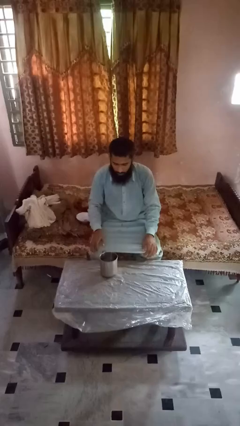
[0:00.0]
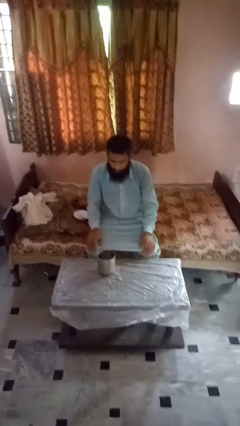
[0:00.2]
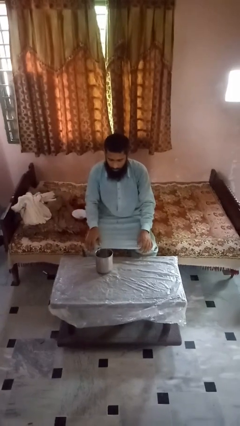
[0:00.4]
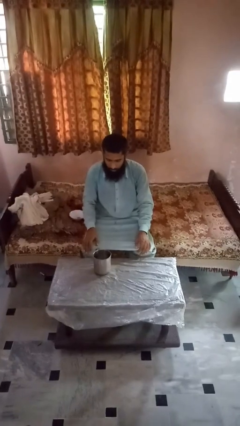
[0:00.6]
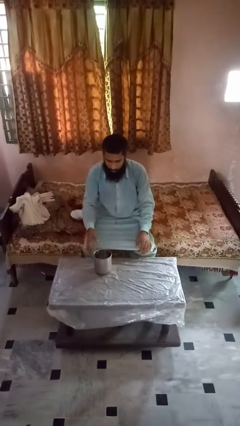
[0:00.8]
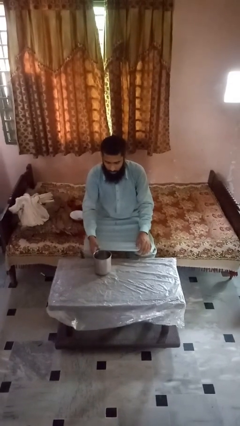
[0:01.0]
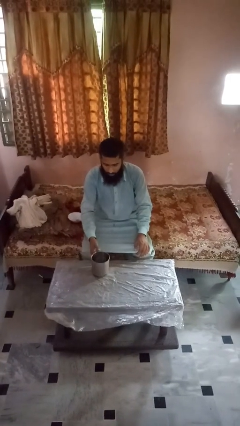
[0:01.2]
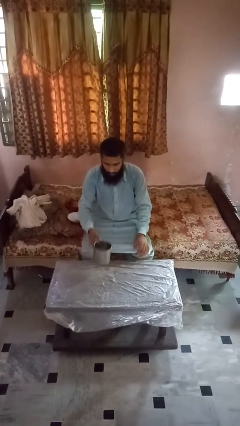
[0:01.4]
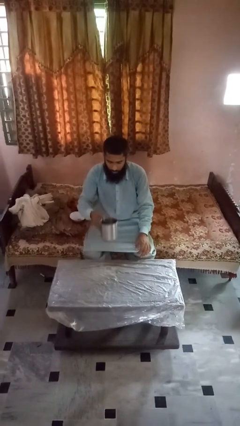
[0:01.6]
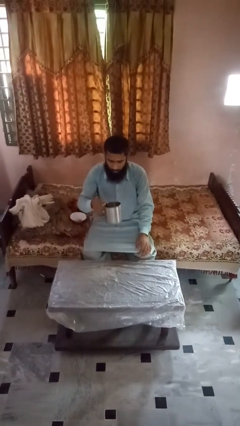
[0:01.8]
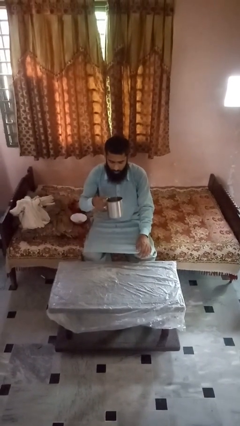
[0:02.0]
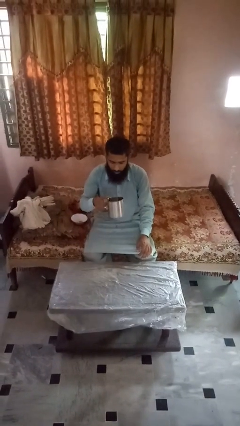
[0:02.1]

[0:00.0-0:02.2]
person picks up object from table

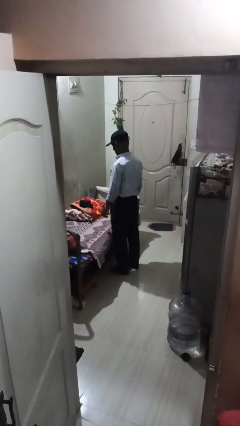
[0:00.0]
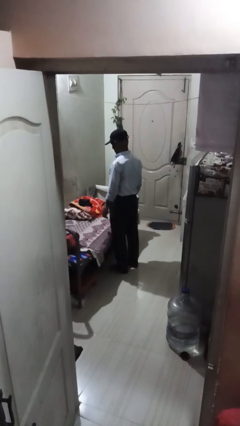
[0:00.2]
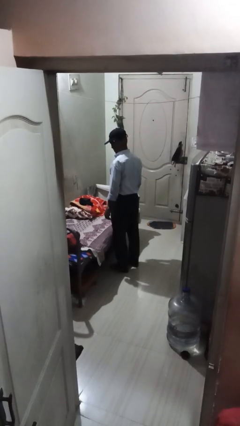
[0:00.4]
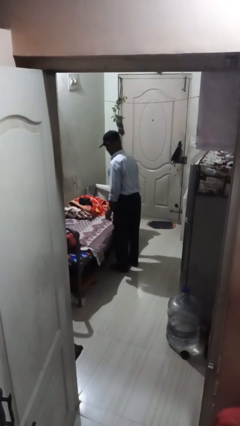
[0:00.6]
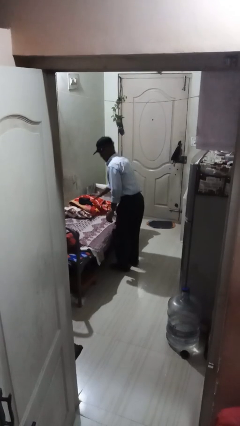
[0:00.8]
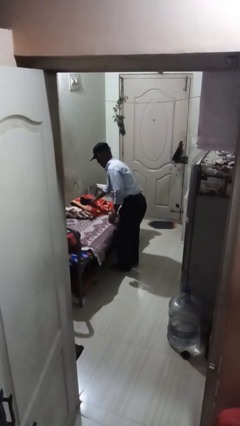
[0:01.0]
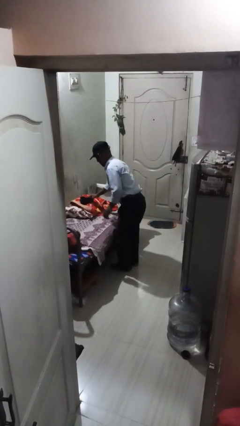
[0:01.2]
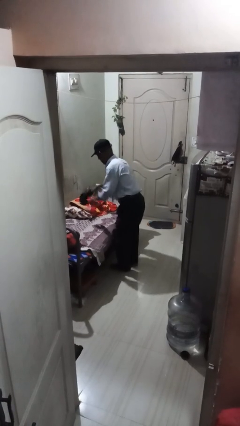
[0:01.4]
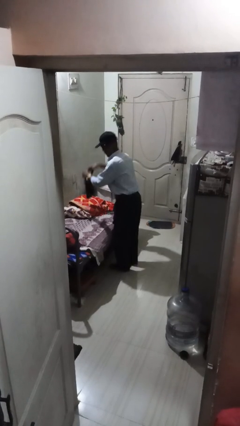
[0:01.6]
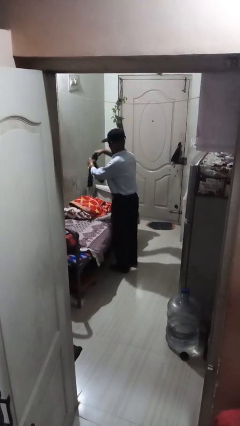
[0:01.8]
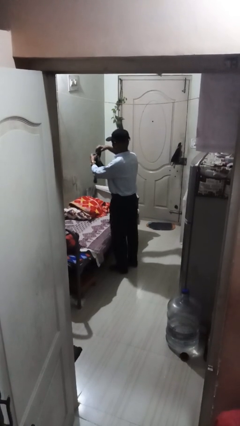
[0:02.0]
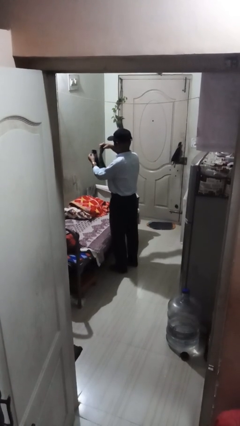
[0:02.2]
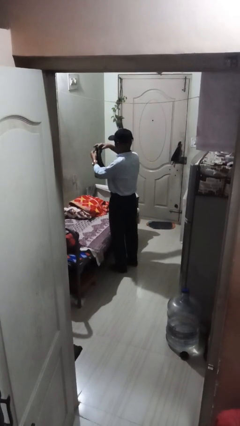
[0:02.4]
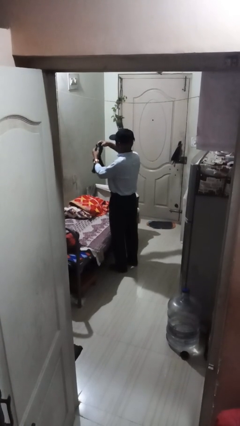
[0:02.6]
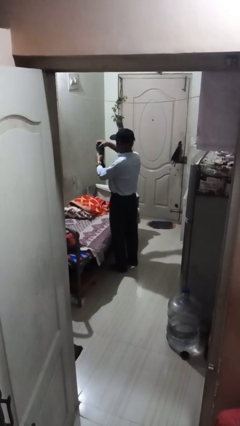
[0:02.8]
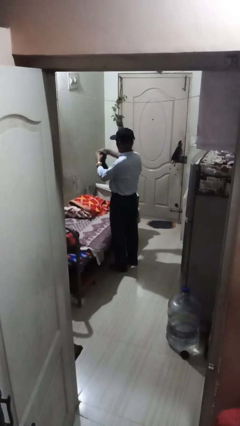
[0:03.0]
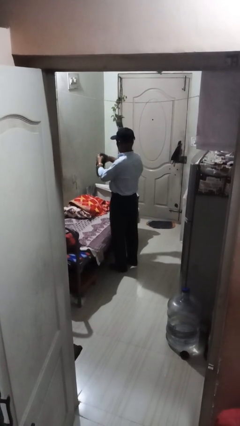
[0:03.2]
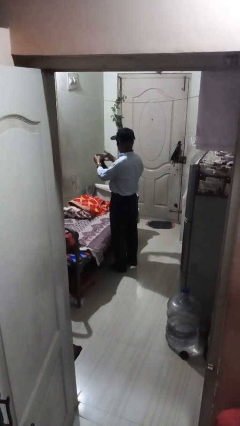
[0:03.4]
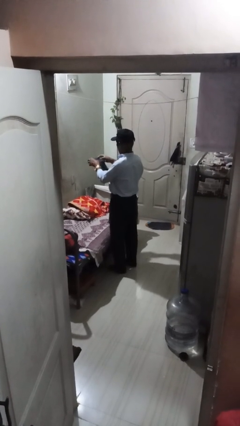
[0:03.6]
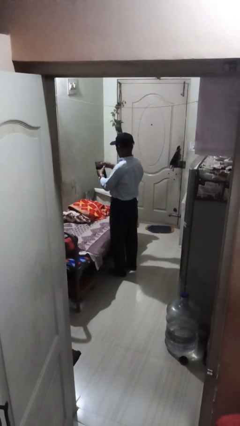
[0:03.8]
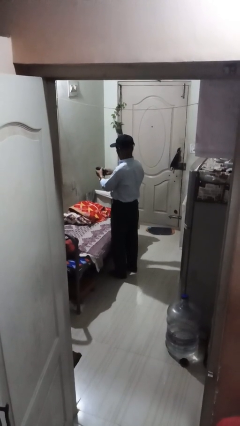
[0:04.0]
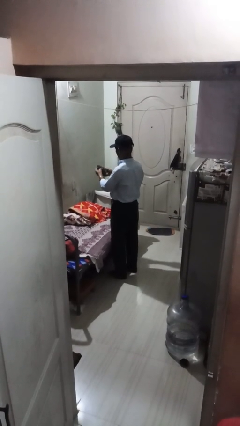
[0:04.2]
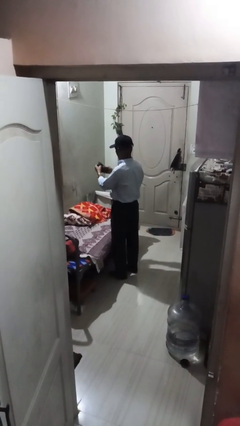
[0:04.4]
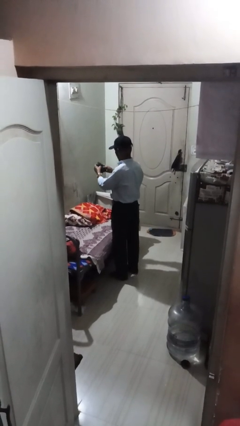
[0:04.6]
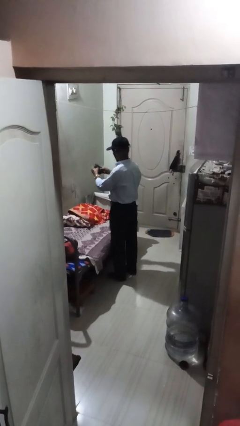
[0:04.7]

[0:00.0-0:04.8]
person folds socks

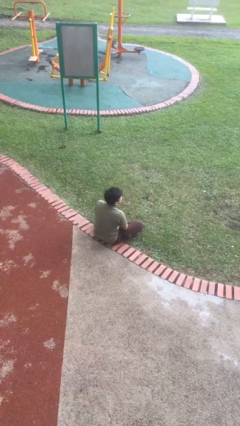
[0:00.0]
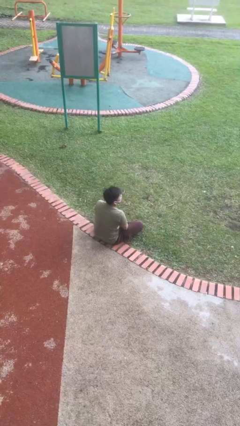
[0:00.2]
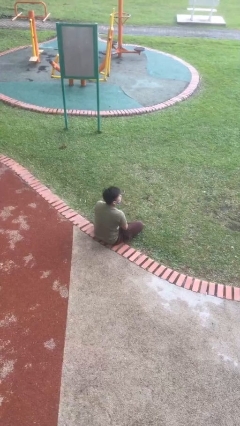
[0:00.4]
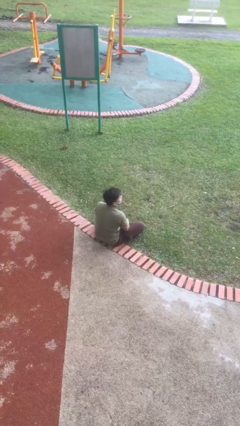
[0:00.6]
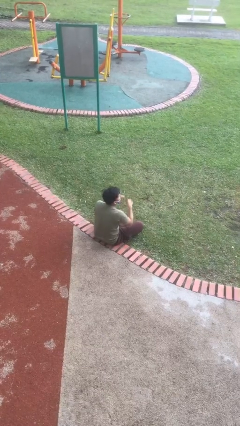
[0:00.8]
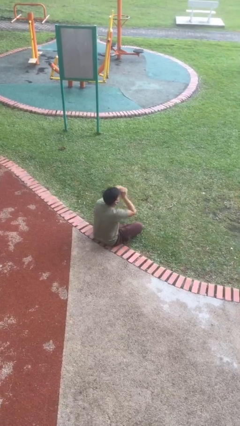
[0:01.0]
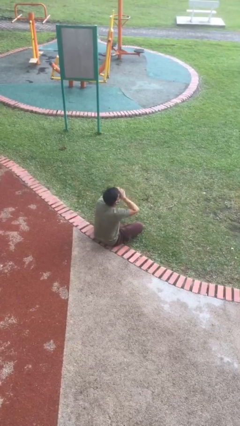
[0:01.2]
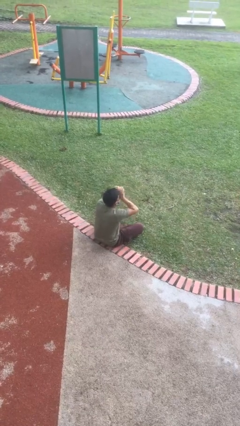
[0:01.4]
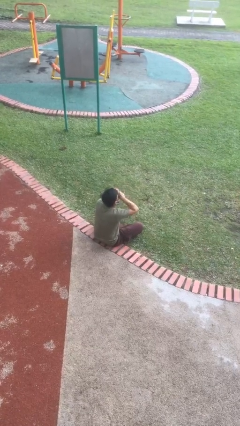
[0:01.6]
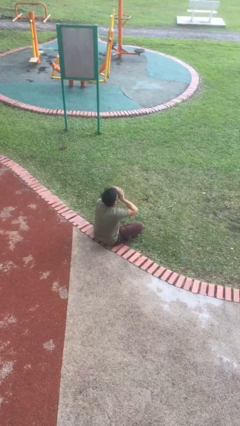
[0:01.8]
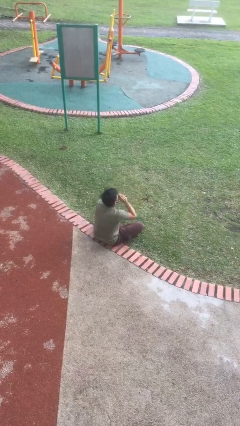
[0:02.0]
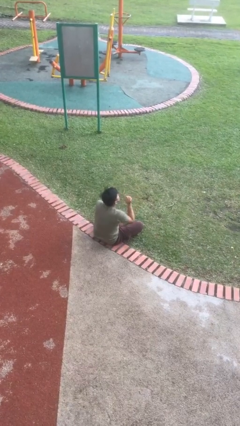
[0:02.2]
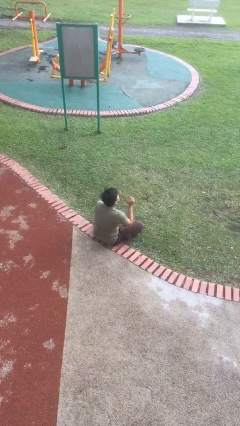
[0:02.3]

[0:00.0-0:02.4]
person rubs eyes

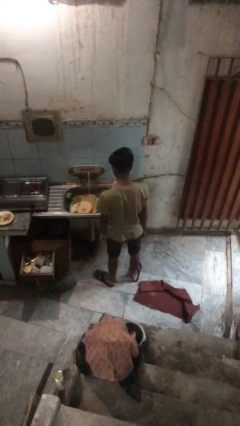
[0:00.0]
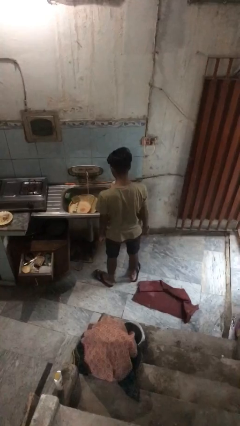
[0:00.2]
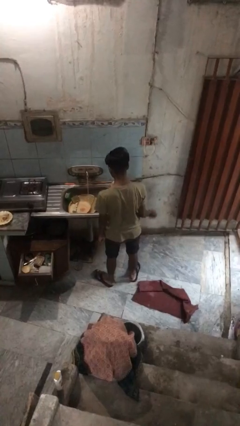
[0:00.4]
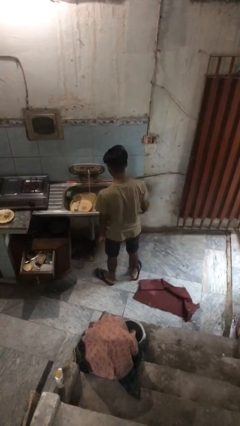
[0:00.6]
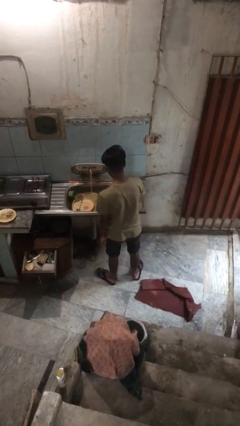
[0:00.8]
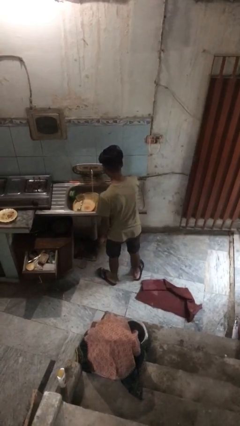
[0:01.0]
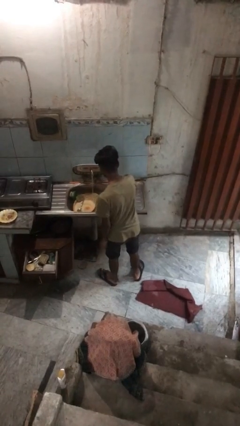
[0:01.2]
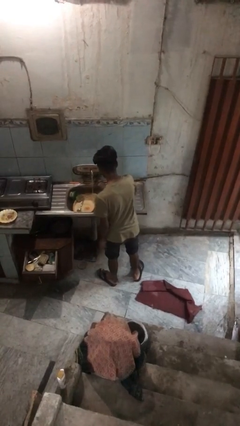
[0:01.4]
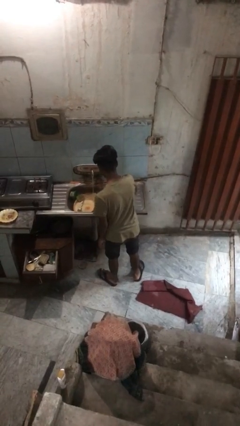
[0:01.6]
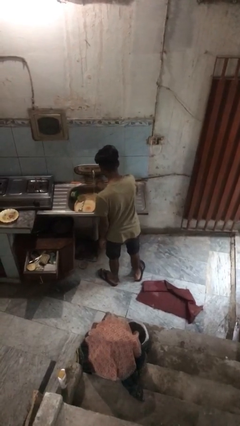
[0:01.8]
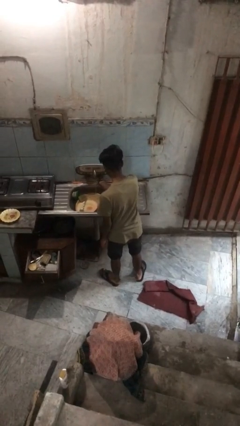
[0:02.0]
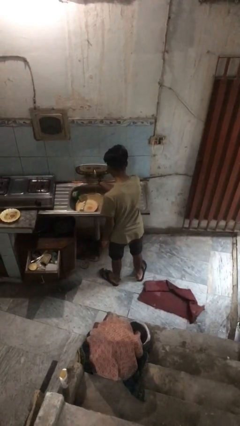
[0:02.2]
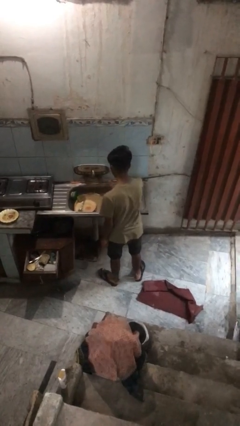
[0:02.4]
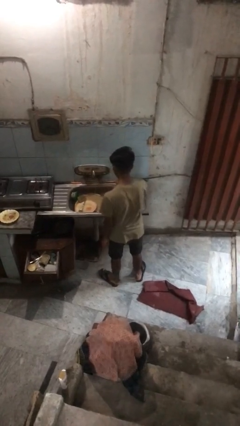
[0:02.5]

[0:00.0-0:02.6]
person turns off faucet

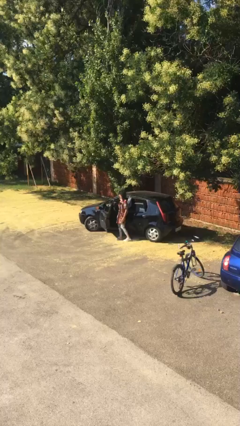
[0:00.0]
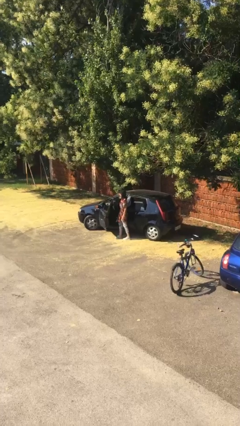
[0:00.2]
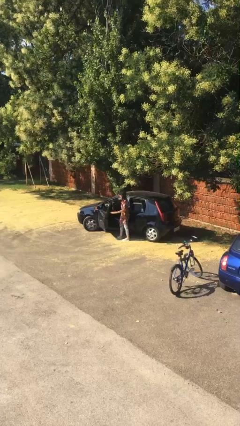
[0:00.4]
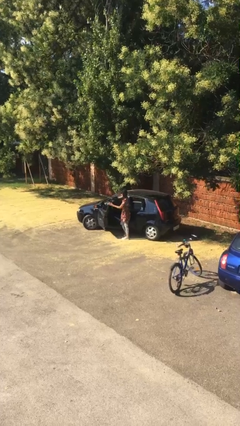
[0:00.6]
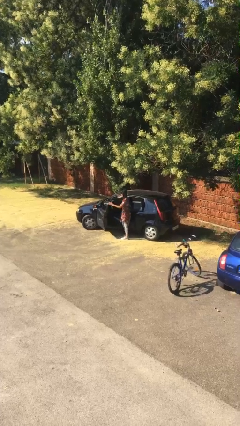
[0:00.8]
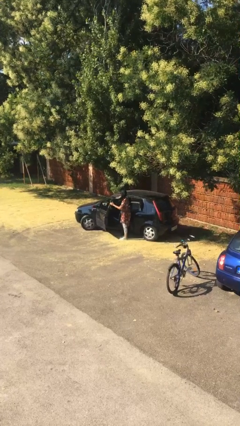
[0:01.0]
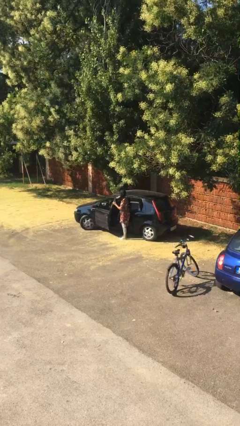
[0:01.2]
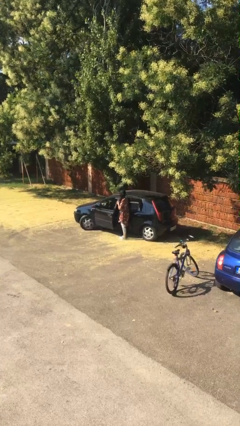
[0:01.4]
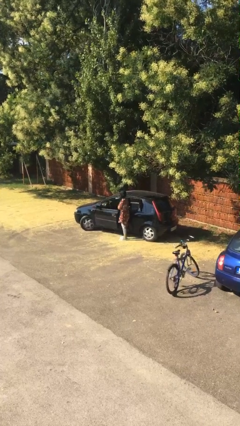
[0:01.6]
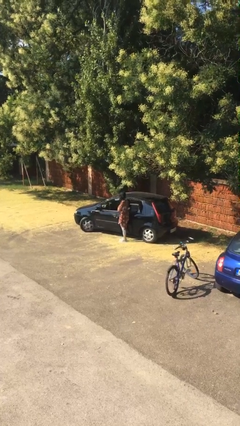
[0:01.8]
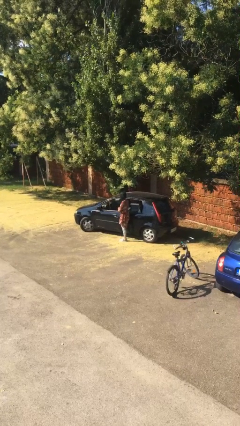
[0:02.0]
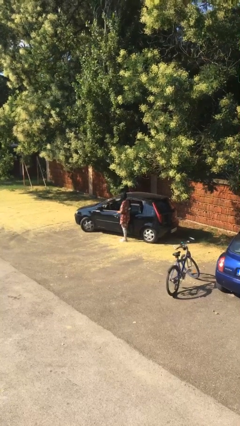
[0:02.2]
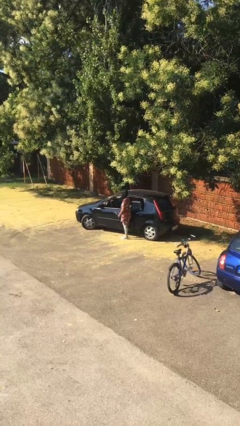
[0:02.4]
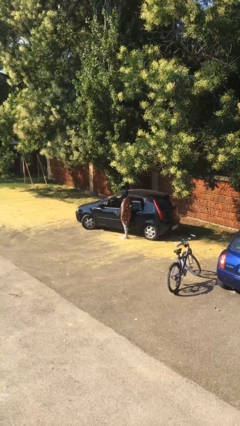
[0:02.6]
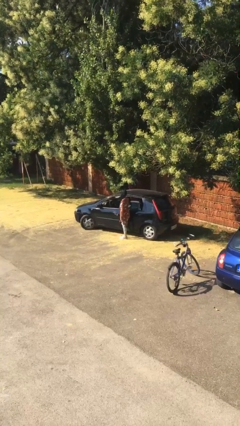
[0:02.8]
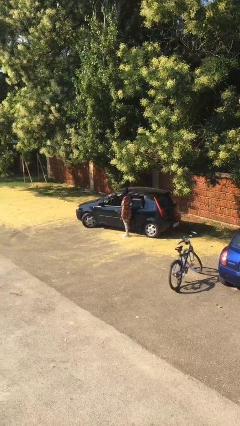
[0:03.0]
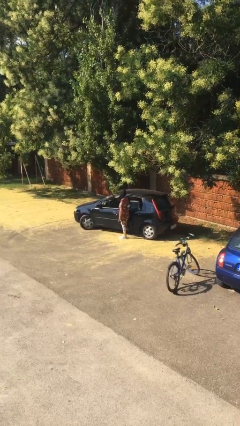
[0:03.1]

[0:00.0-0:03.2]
person closes car door

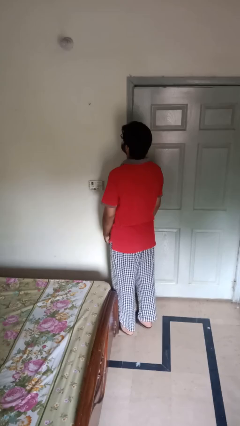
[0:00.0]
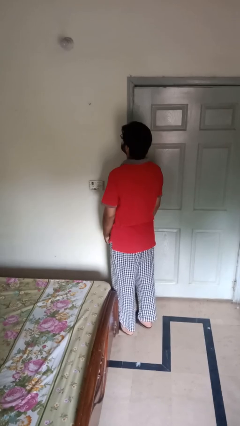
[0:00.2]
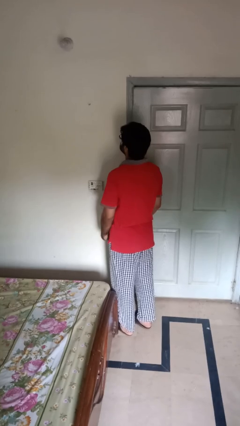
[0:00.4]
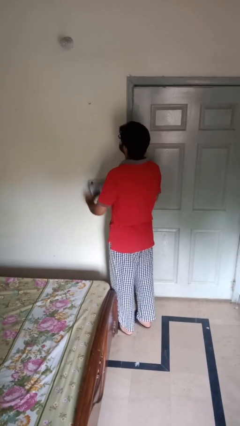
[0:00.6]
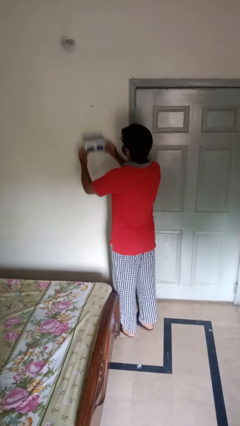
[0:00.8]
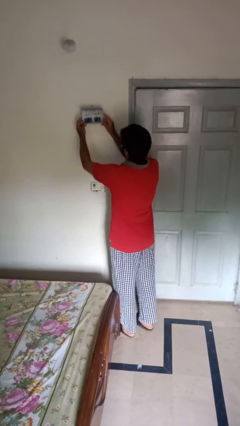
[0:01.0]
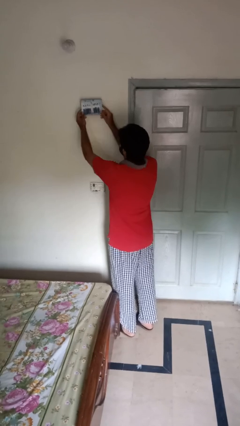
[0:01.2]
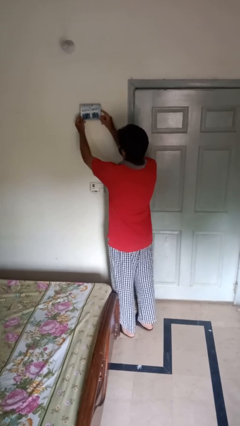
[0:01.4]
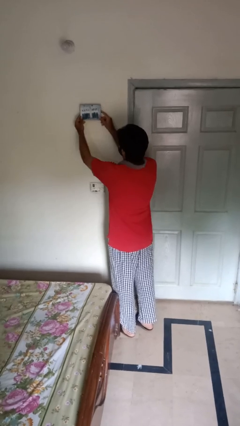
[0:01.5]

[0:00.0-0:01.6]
person puts up picture frame

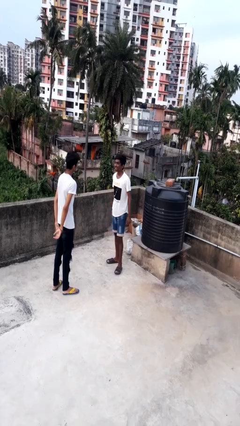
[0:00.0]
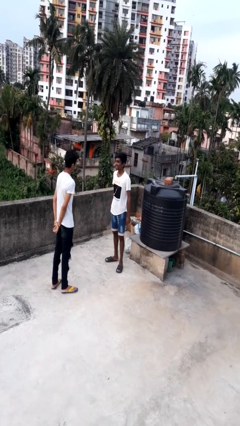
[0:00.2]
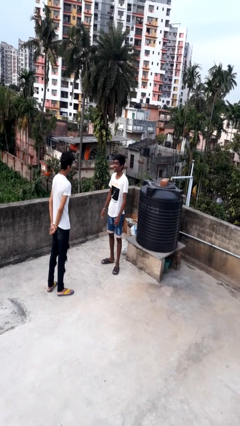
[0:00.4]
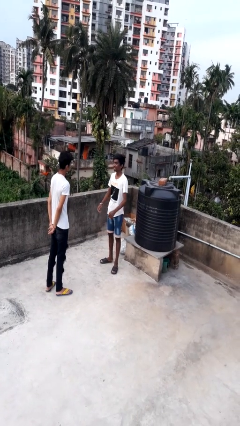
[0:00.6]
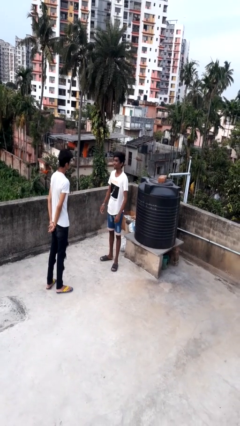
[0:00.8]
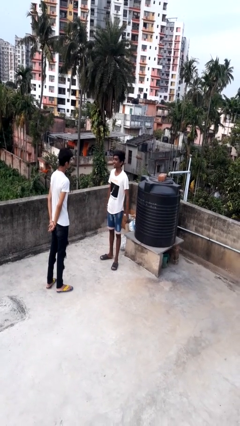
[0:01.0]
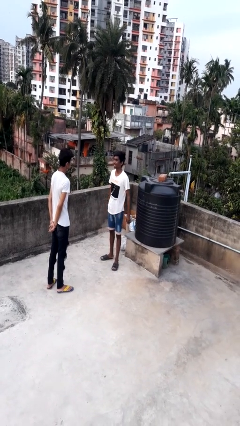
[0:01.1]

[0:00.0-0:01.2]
person highfives hand
